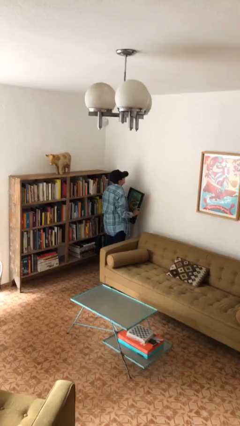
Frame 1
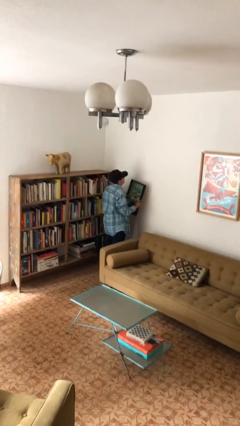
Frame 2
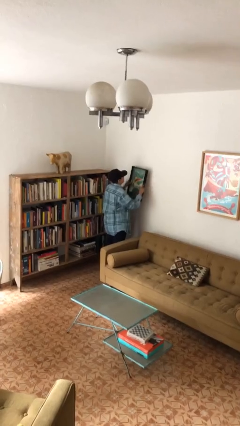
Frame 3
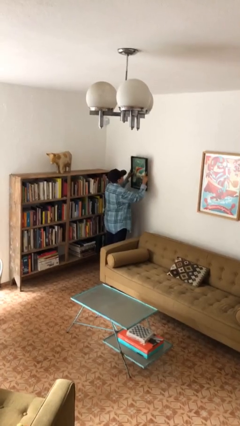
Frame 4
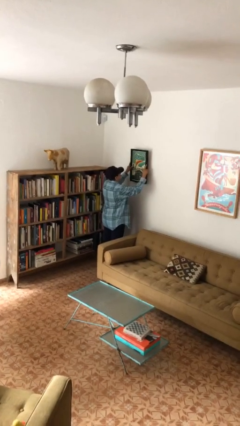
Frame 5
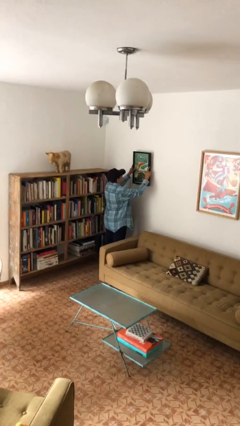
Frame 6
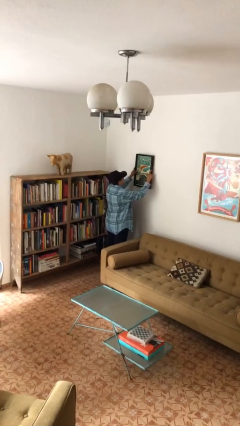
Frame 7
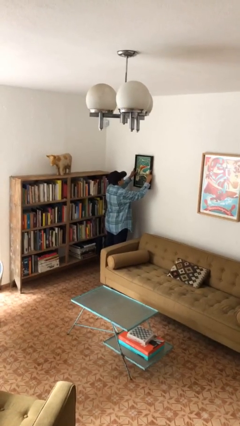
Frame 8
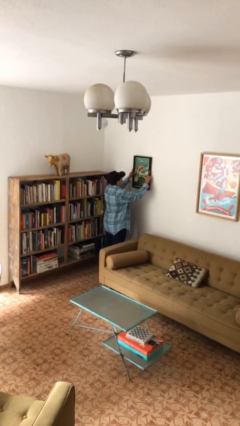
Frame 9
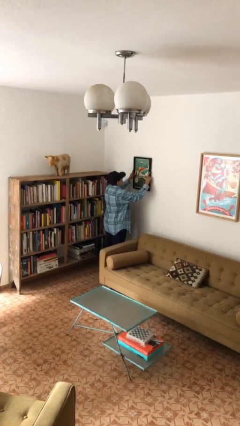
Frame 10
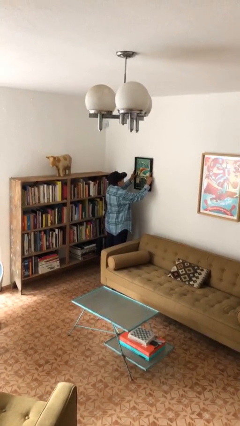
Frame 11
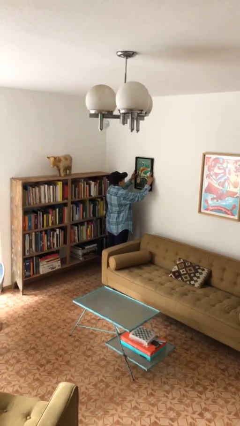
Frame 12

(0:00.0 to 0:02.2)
person puts up picture frame

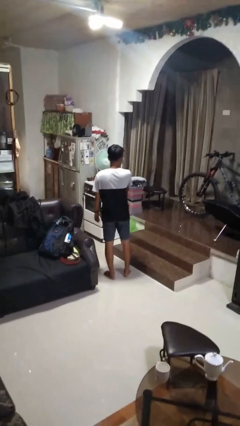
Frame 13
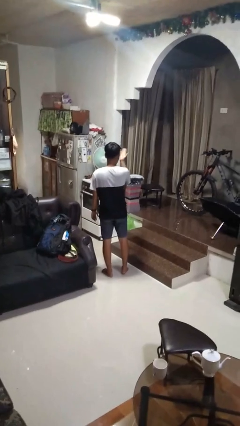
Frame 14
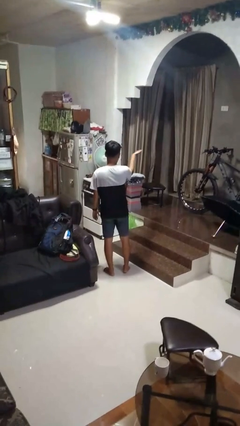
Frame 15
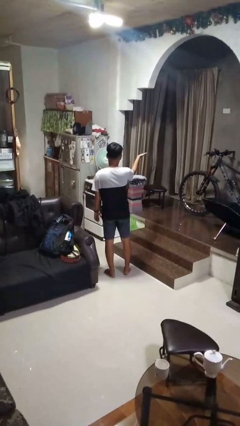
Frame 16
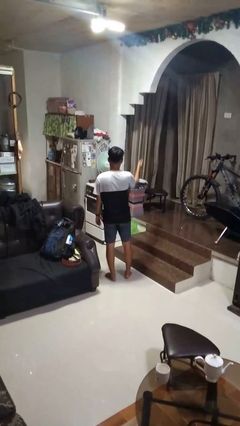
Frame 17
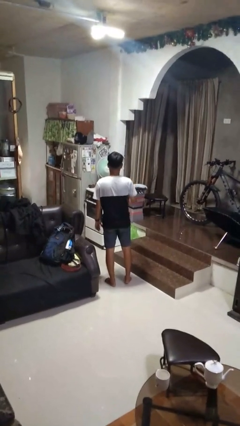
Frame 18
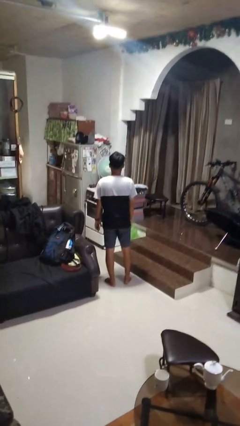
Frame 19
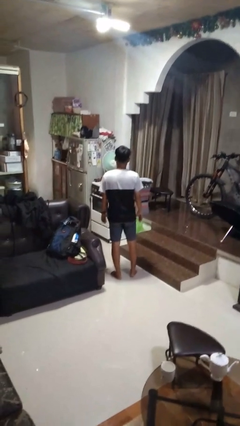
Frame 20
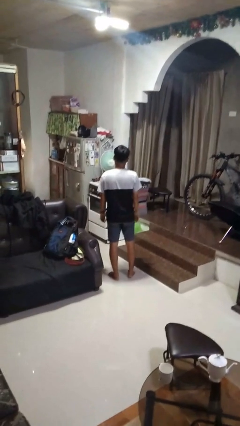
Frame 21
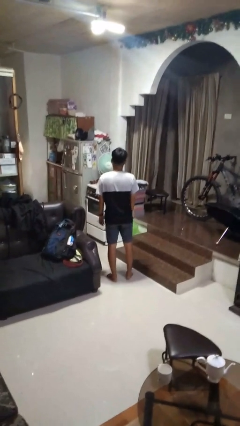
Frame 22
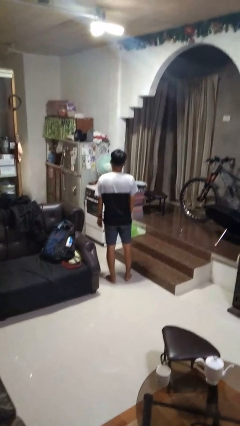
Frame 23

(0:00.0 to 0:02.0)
person gestures blow kiss

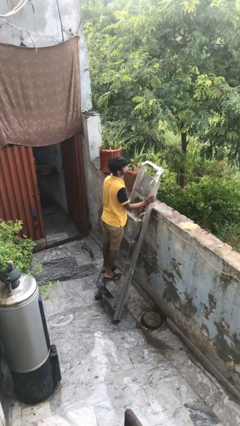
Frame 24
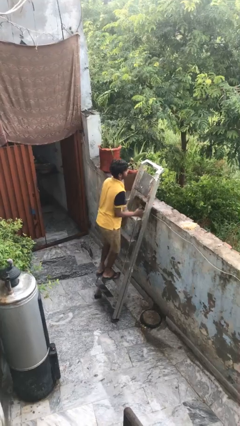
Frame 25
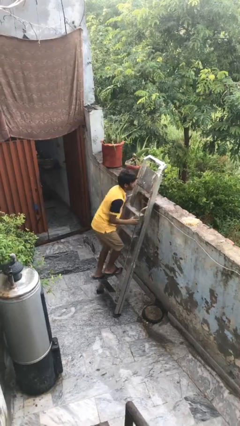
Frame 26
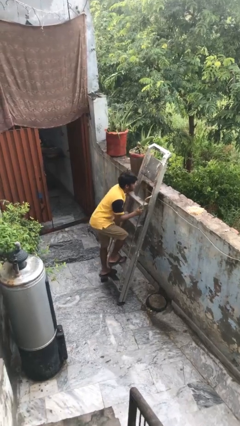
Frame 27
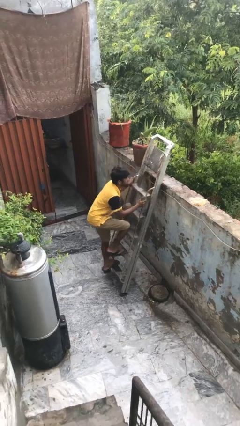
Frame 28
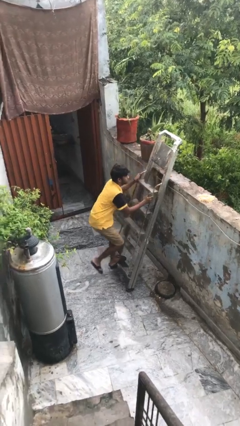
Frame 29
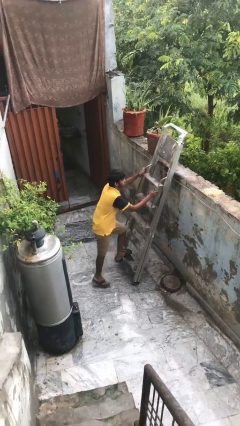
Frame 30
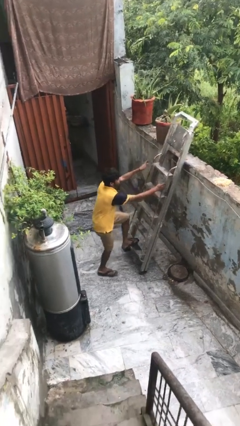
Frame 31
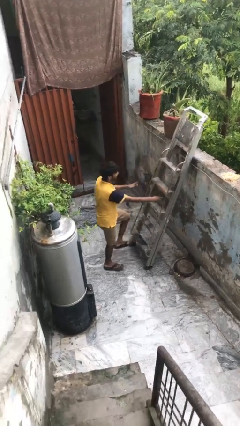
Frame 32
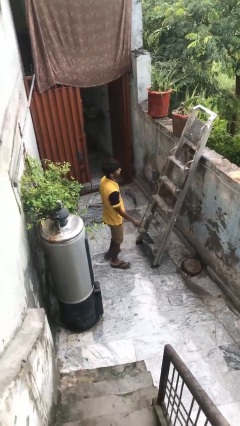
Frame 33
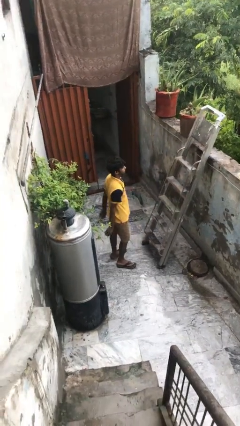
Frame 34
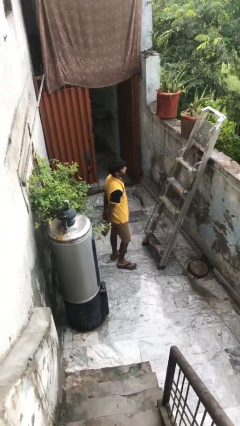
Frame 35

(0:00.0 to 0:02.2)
person climbs down ladder

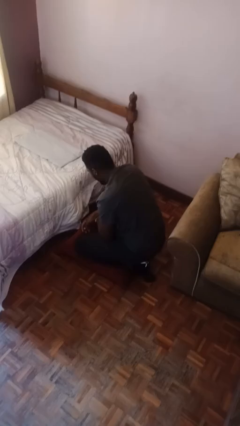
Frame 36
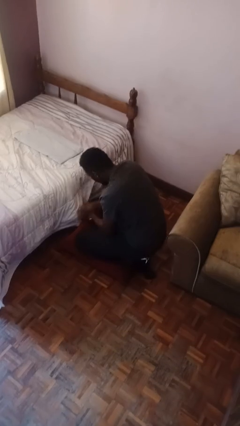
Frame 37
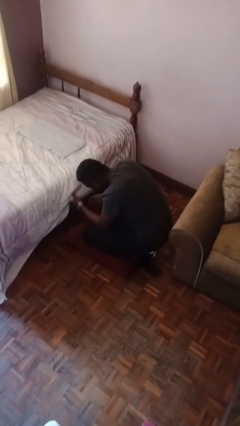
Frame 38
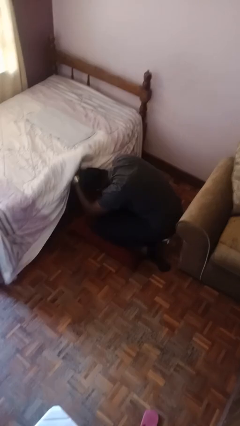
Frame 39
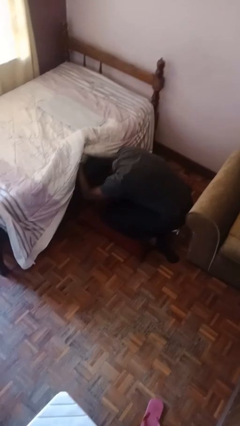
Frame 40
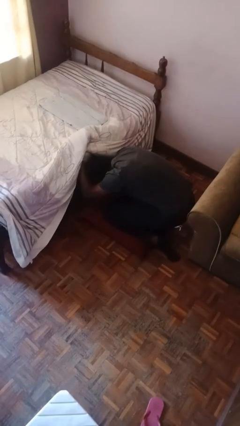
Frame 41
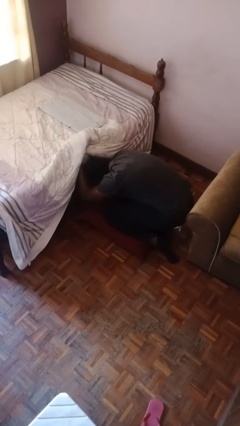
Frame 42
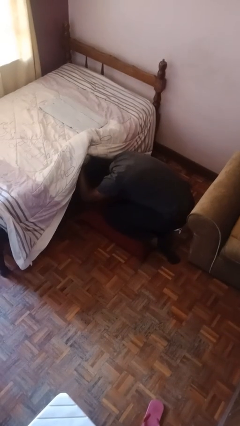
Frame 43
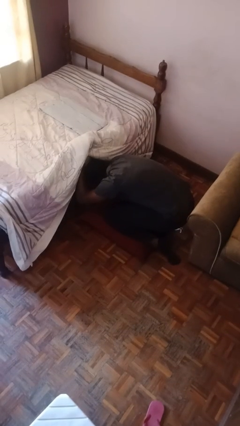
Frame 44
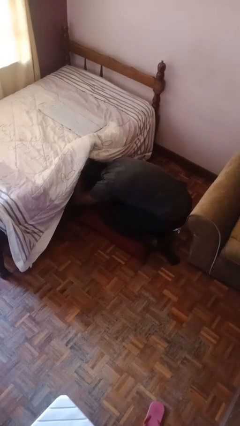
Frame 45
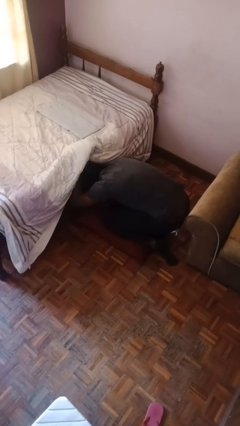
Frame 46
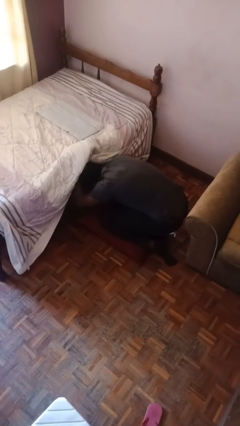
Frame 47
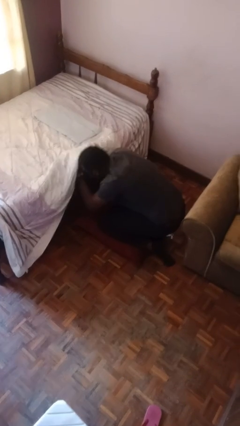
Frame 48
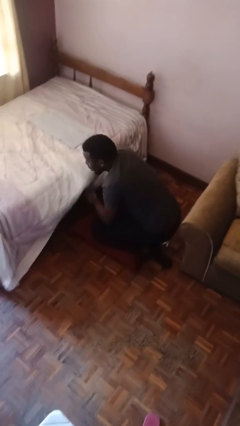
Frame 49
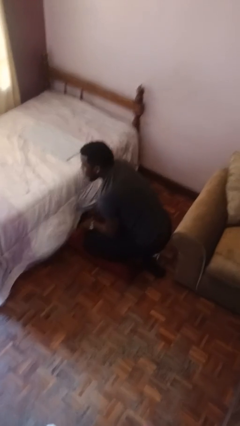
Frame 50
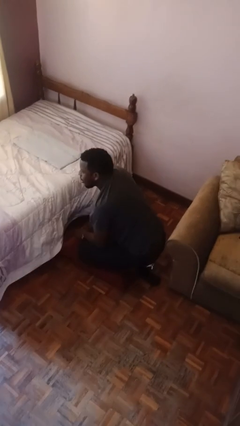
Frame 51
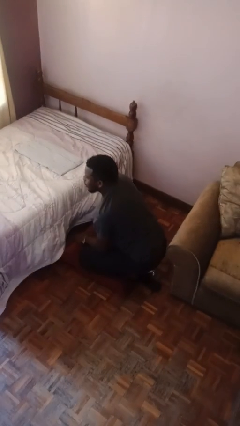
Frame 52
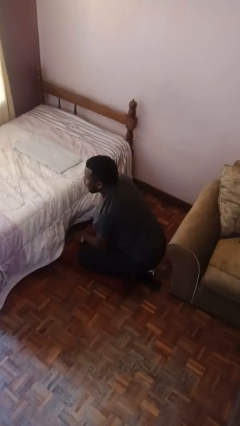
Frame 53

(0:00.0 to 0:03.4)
person searches under bed

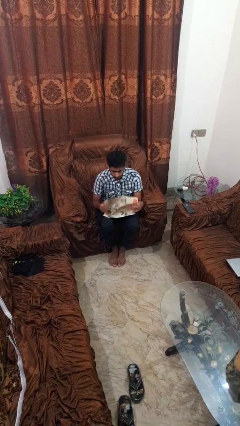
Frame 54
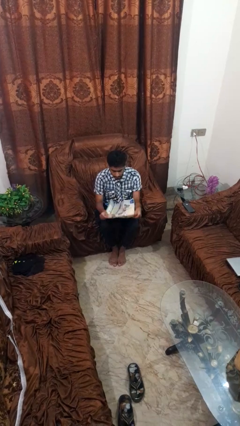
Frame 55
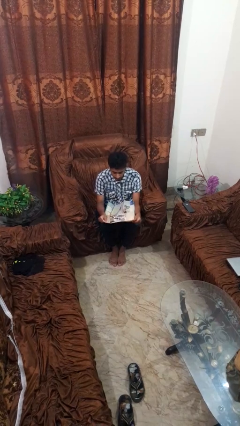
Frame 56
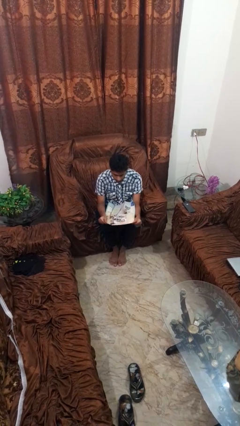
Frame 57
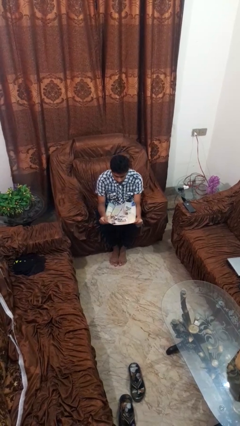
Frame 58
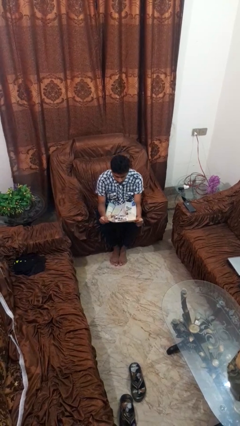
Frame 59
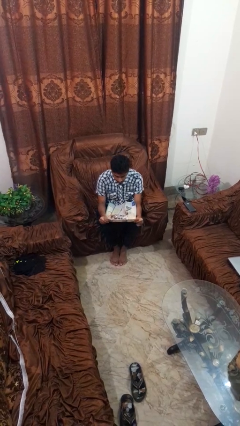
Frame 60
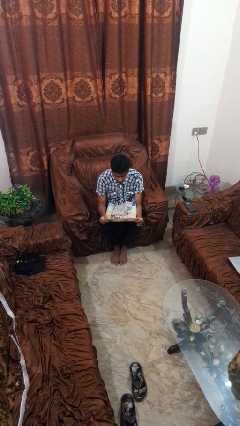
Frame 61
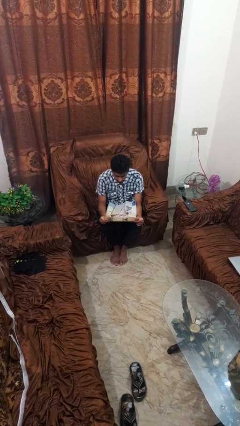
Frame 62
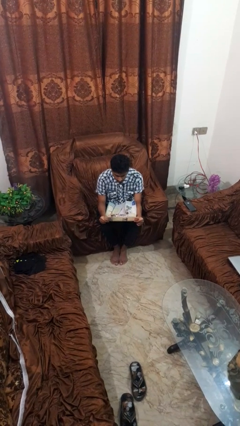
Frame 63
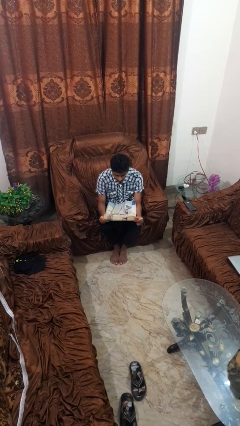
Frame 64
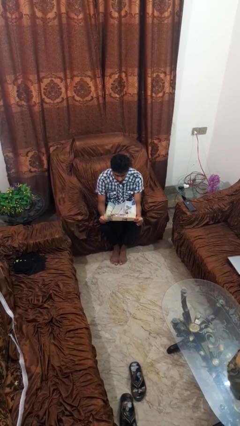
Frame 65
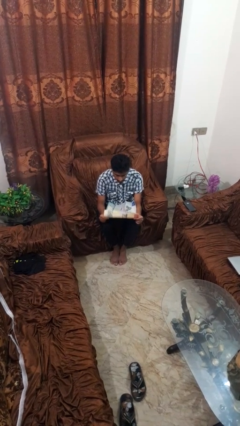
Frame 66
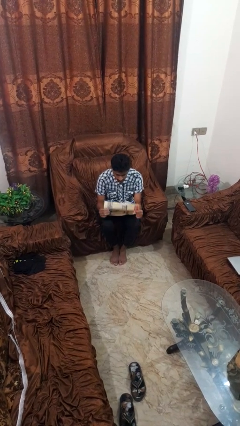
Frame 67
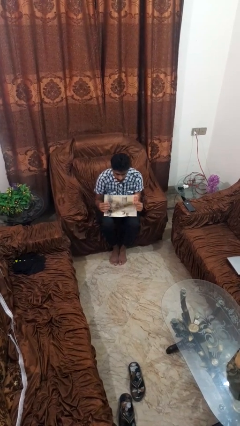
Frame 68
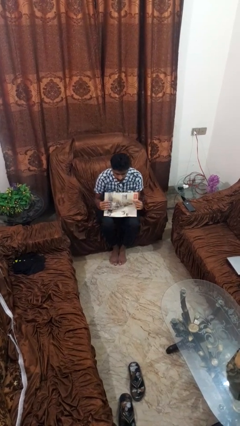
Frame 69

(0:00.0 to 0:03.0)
person reads newspaper

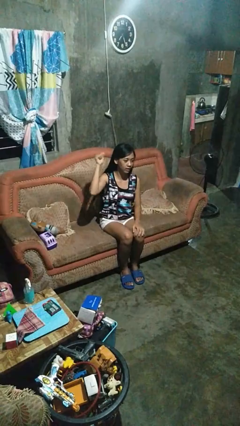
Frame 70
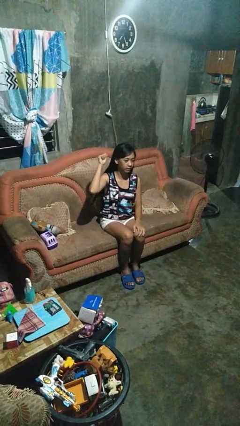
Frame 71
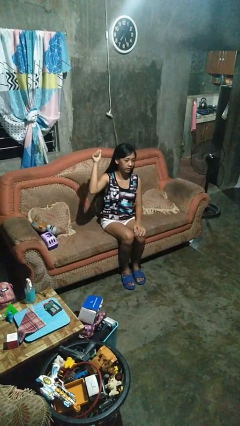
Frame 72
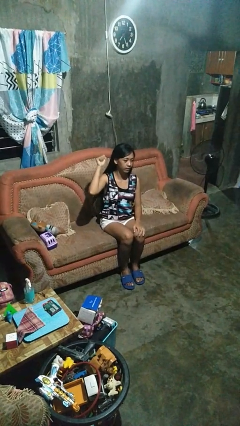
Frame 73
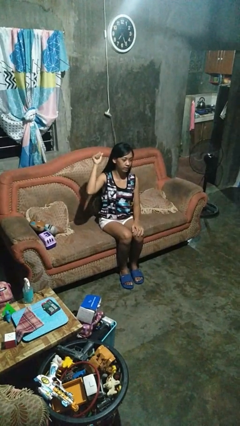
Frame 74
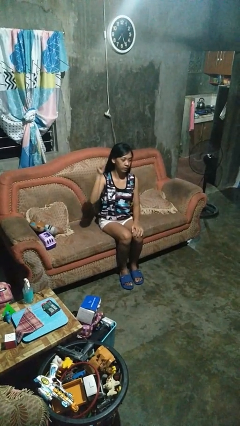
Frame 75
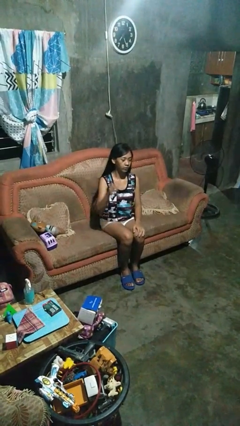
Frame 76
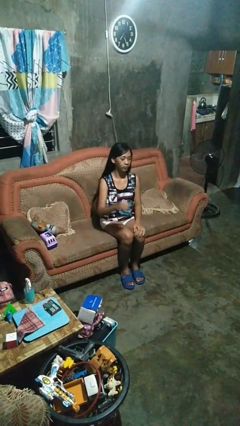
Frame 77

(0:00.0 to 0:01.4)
person gestures behind me

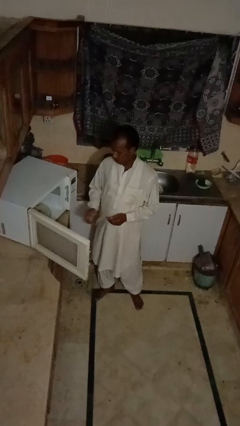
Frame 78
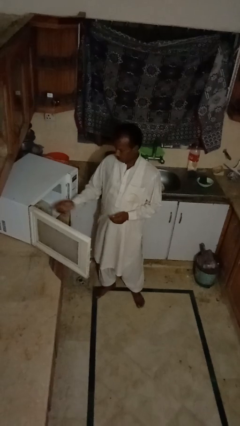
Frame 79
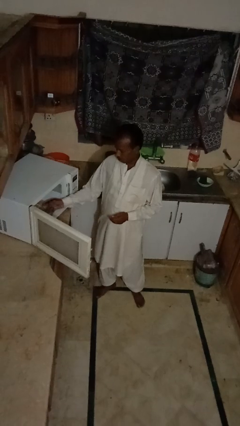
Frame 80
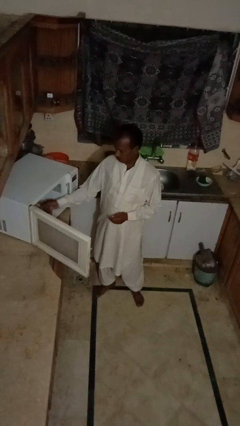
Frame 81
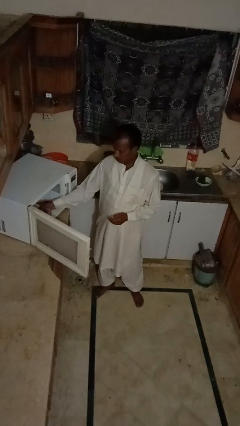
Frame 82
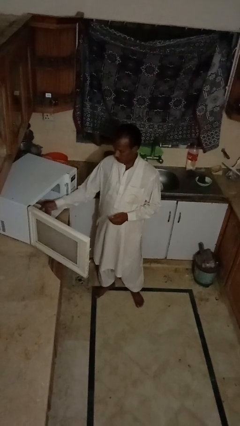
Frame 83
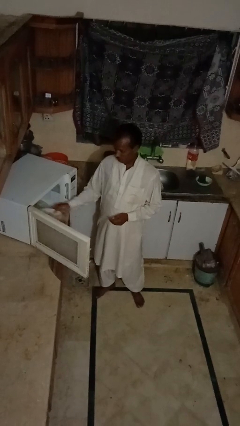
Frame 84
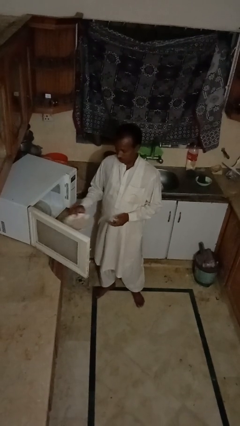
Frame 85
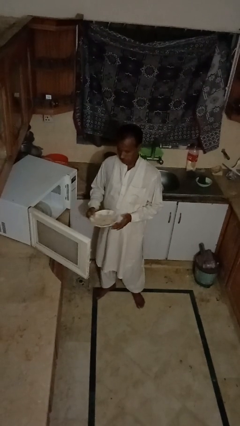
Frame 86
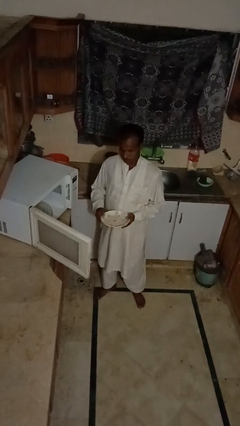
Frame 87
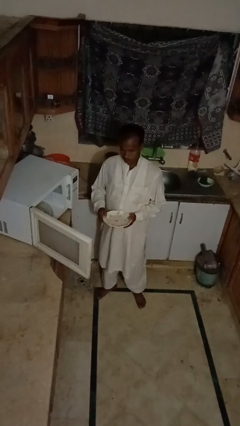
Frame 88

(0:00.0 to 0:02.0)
person takes object from microwave

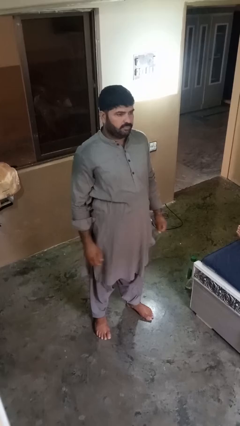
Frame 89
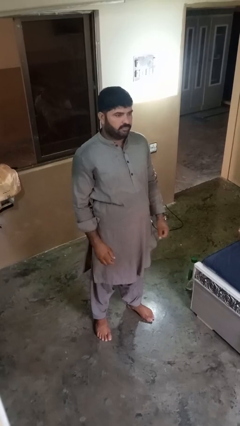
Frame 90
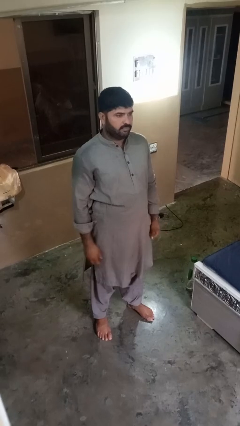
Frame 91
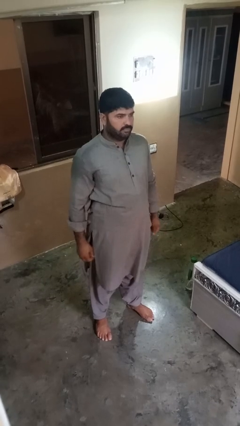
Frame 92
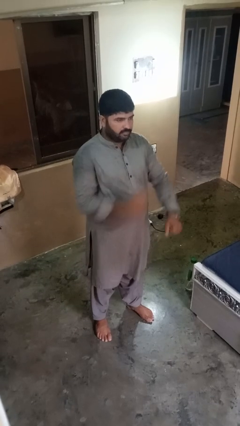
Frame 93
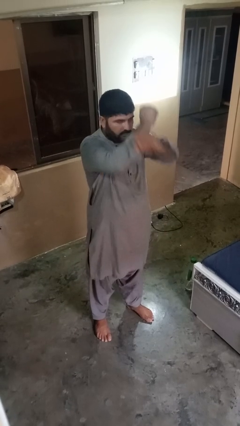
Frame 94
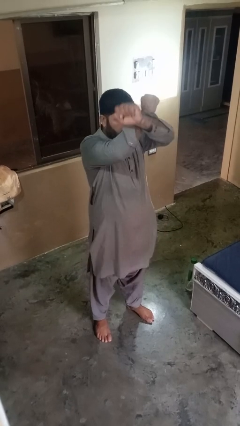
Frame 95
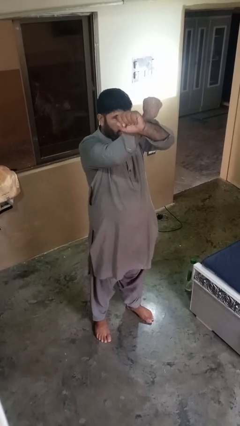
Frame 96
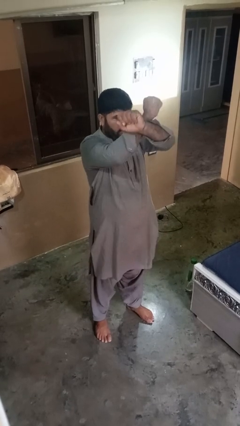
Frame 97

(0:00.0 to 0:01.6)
person gestures arms x
